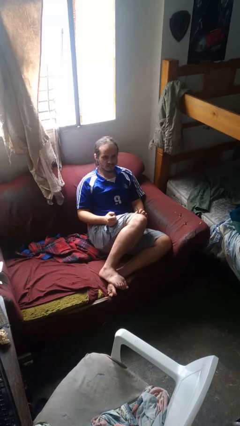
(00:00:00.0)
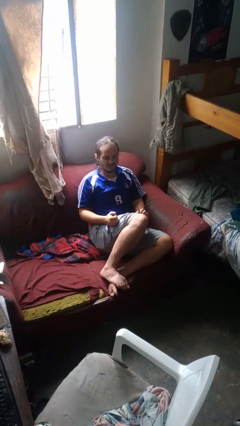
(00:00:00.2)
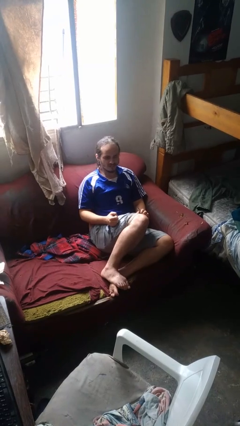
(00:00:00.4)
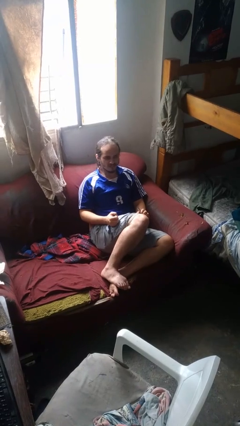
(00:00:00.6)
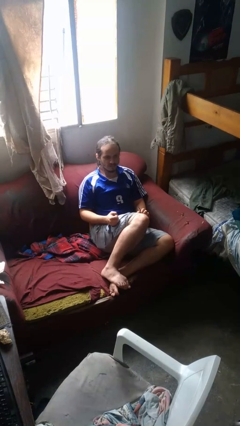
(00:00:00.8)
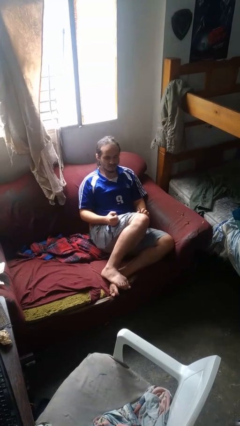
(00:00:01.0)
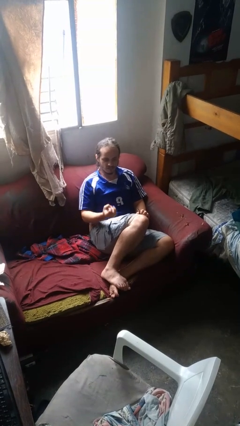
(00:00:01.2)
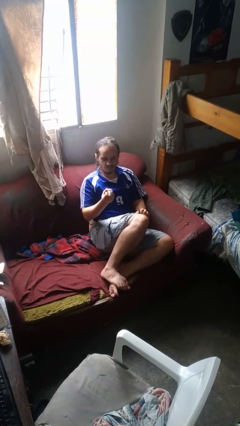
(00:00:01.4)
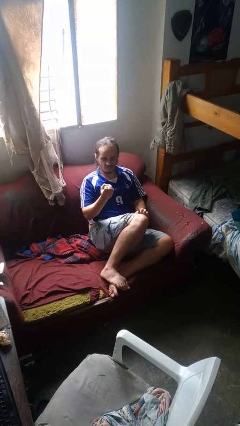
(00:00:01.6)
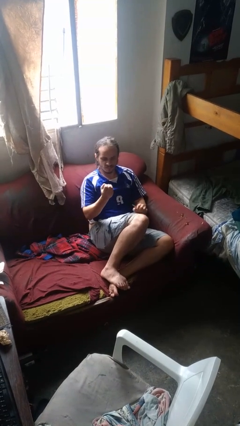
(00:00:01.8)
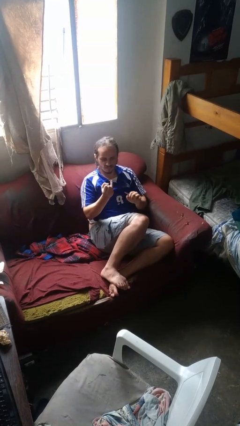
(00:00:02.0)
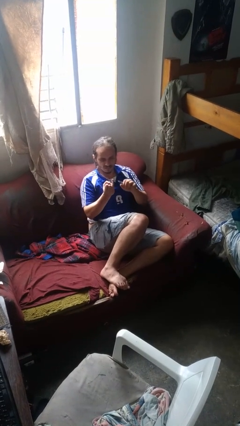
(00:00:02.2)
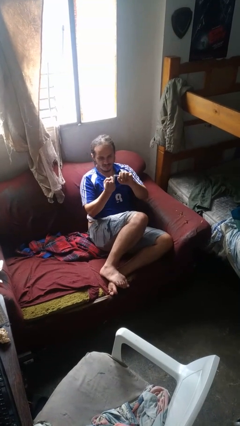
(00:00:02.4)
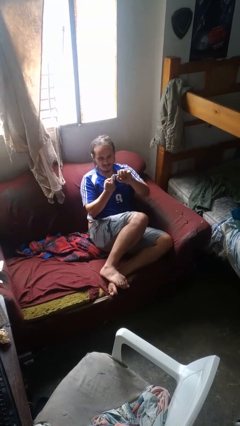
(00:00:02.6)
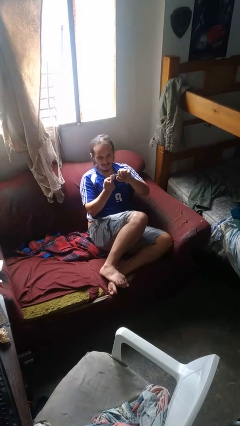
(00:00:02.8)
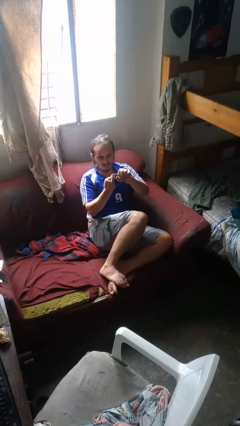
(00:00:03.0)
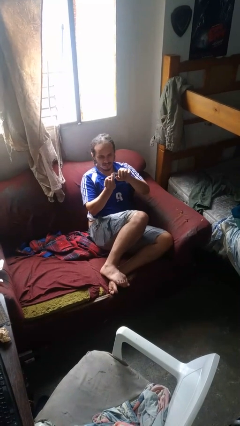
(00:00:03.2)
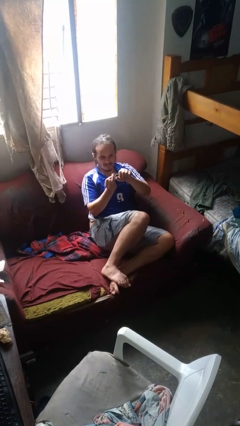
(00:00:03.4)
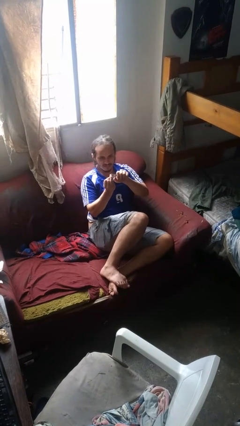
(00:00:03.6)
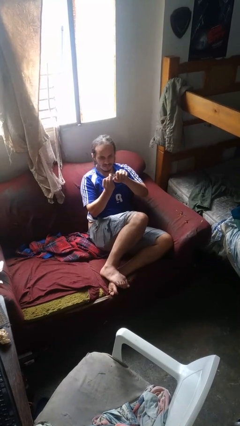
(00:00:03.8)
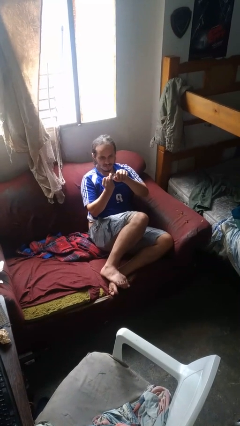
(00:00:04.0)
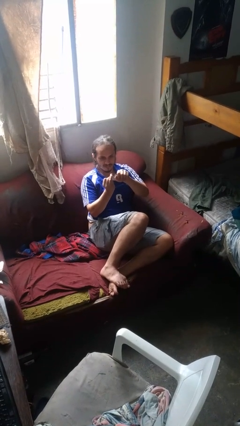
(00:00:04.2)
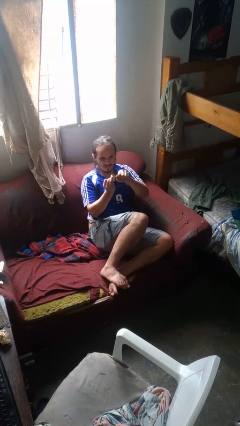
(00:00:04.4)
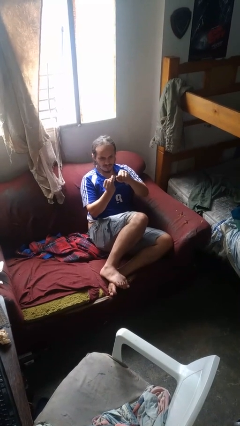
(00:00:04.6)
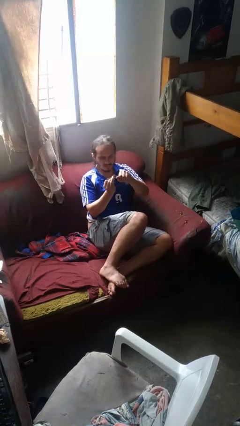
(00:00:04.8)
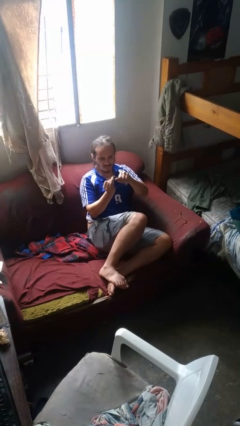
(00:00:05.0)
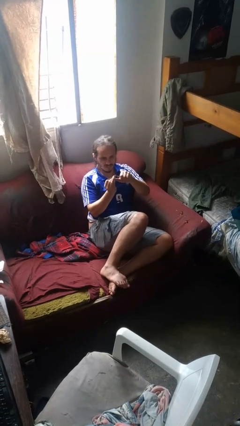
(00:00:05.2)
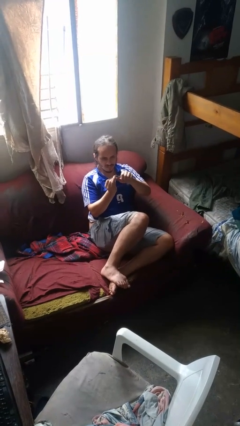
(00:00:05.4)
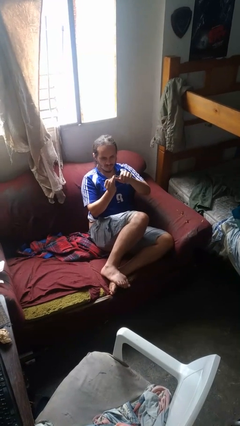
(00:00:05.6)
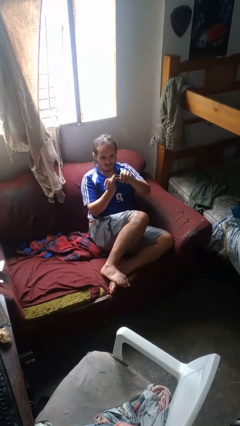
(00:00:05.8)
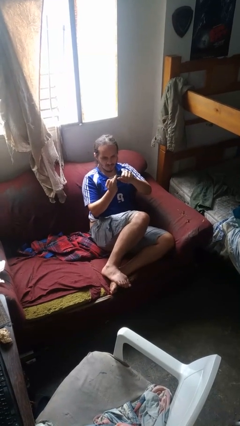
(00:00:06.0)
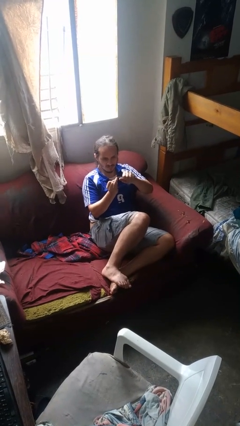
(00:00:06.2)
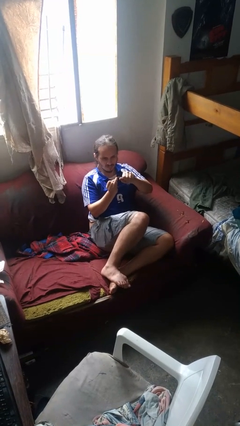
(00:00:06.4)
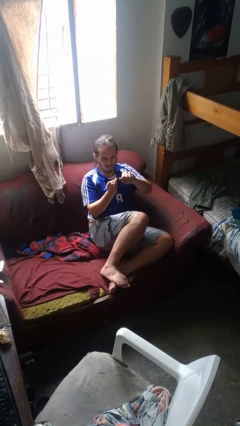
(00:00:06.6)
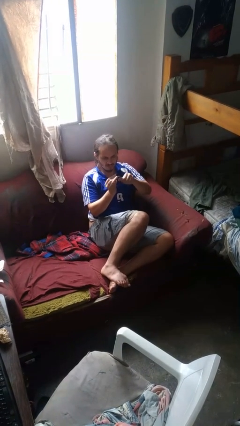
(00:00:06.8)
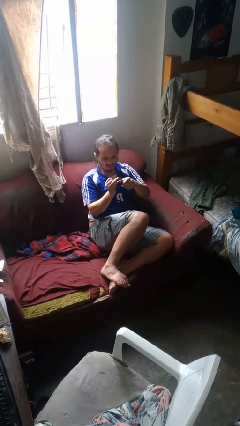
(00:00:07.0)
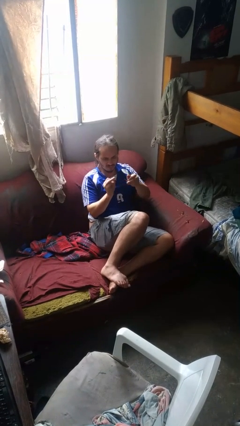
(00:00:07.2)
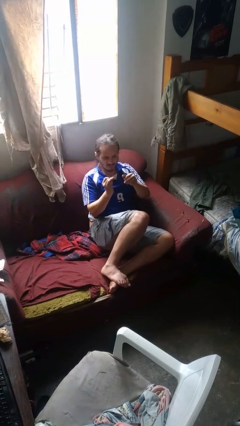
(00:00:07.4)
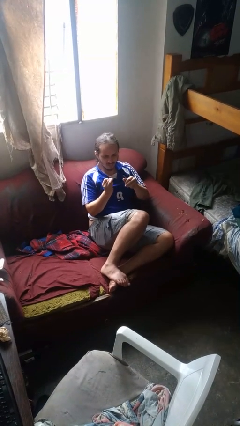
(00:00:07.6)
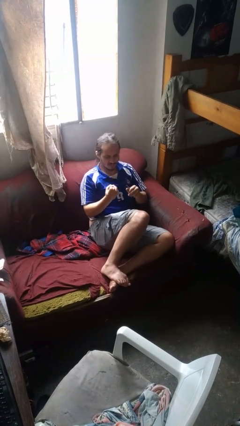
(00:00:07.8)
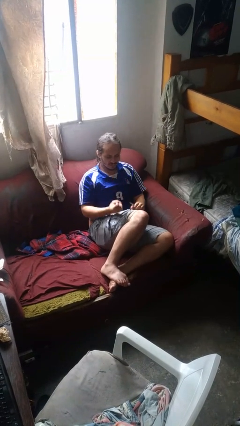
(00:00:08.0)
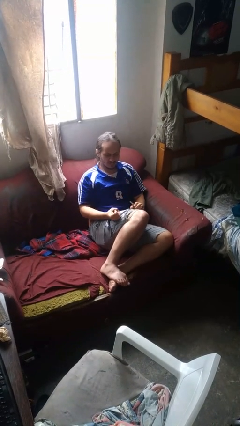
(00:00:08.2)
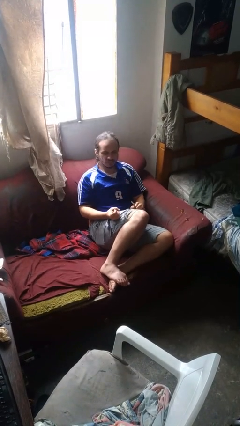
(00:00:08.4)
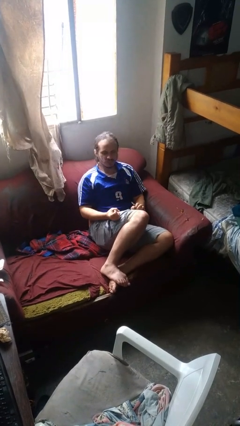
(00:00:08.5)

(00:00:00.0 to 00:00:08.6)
person clips fingernails

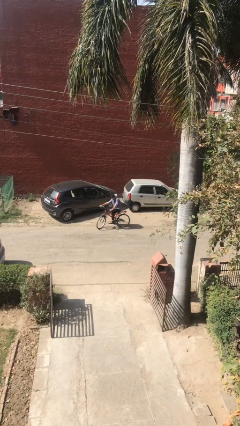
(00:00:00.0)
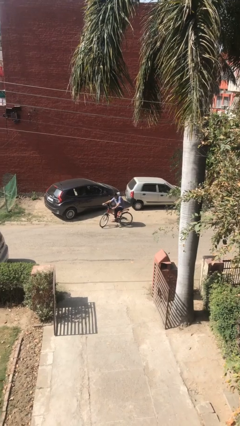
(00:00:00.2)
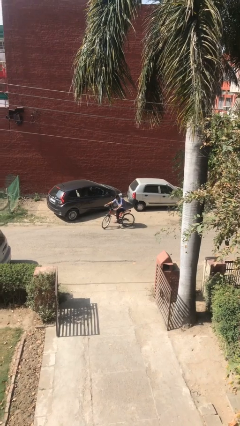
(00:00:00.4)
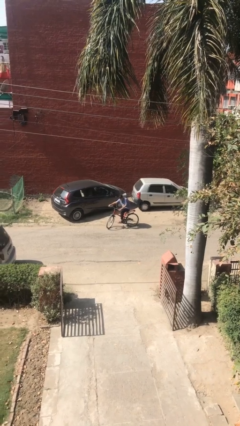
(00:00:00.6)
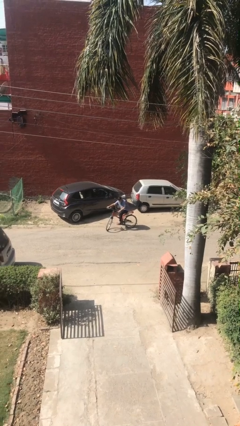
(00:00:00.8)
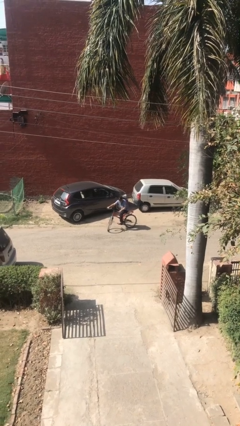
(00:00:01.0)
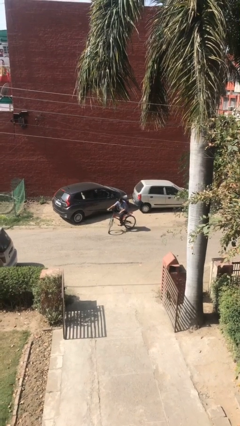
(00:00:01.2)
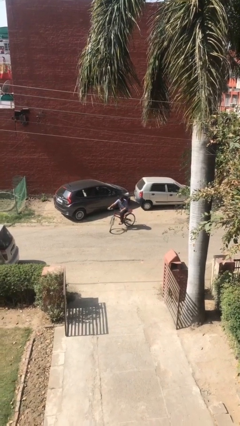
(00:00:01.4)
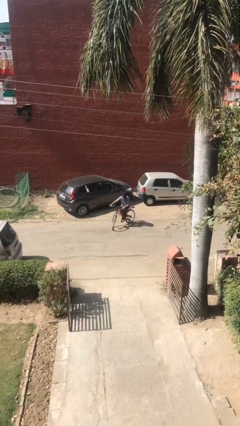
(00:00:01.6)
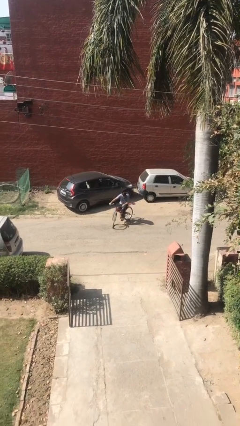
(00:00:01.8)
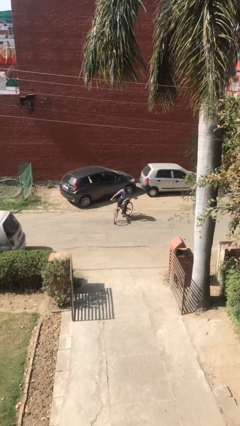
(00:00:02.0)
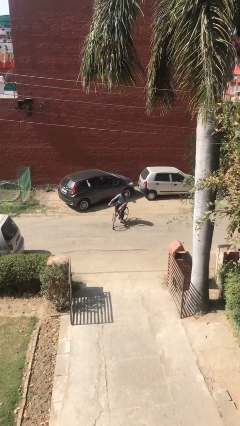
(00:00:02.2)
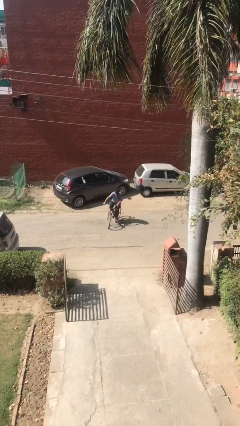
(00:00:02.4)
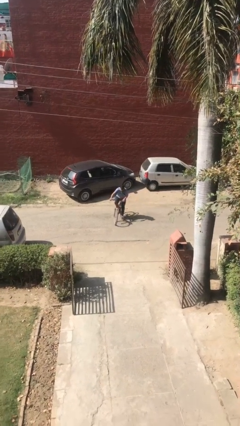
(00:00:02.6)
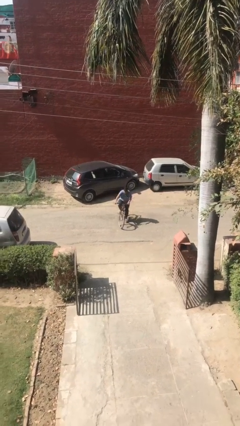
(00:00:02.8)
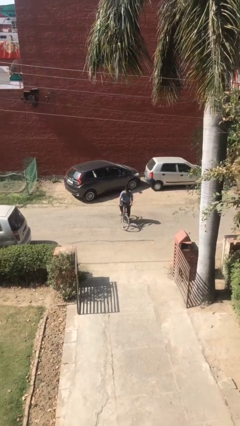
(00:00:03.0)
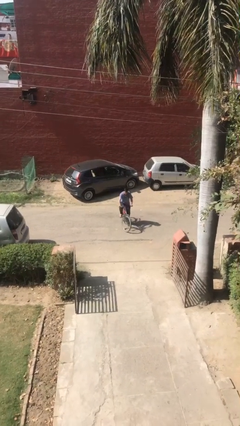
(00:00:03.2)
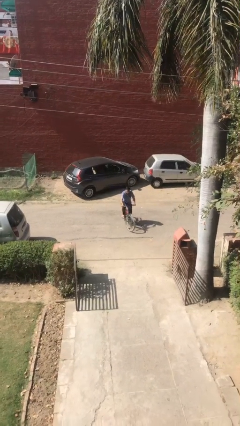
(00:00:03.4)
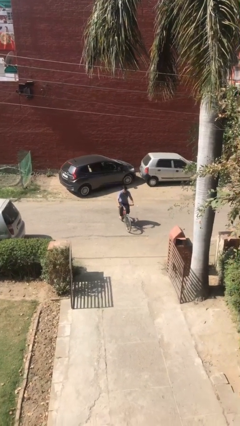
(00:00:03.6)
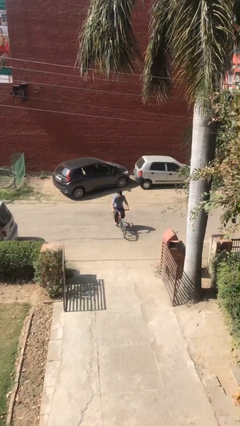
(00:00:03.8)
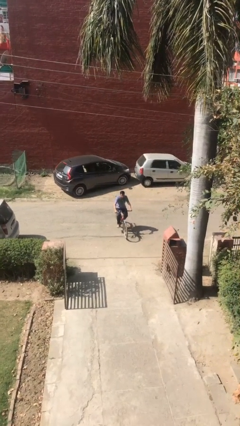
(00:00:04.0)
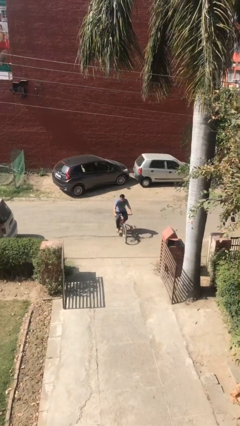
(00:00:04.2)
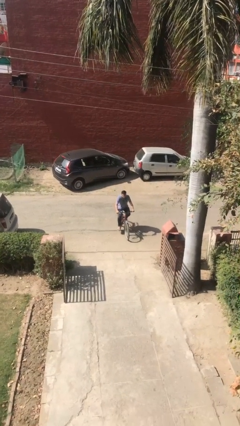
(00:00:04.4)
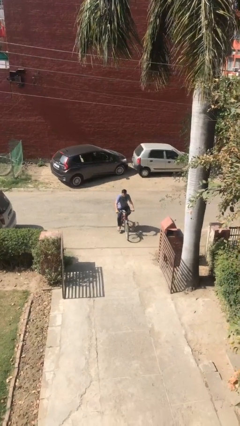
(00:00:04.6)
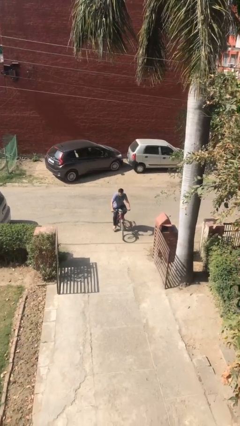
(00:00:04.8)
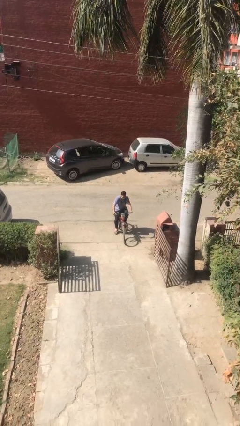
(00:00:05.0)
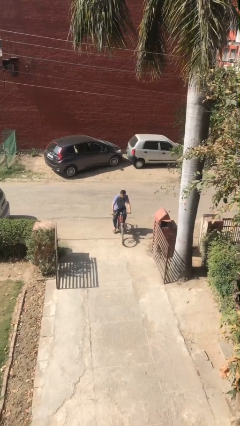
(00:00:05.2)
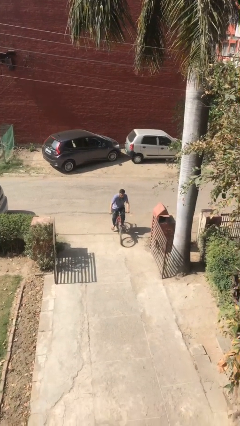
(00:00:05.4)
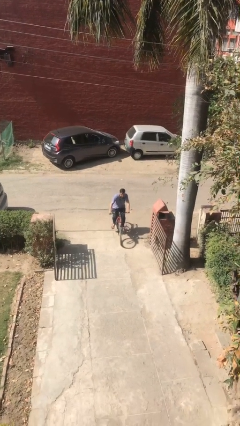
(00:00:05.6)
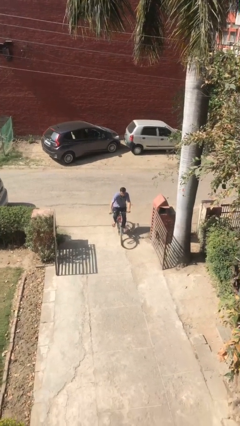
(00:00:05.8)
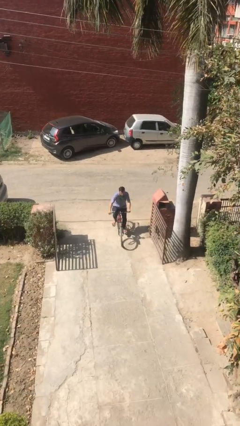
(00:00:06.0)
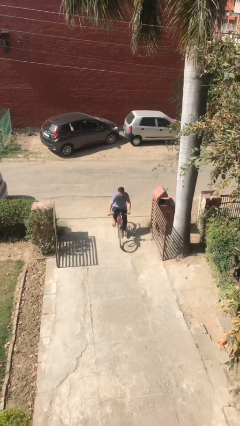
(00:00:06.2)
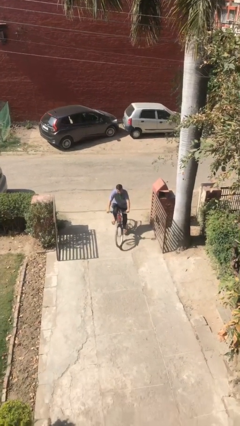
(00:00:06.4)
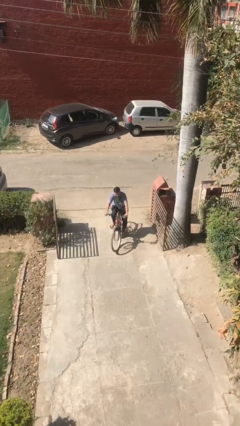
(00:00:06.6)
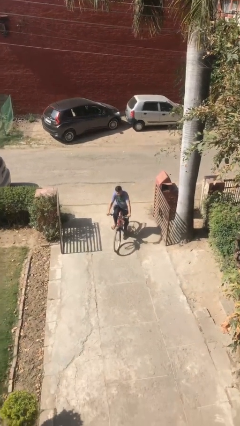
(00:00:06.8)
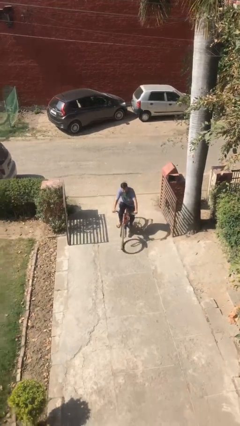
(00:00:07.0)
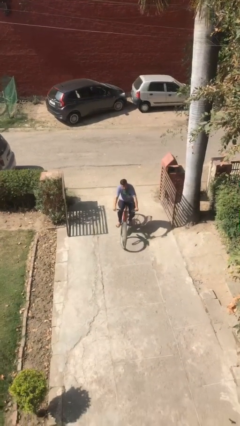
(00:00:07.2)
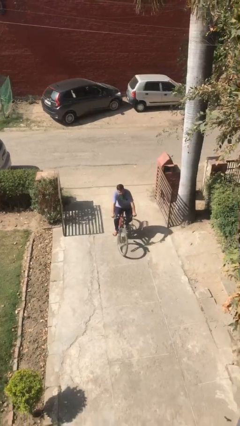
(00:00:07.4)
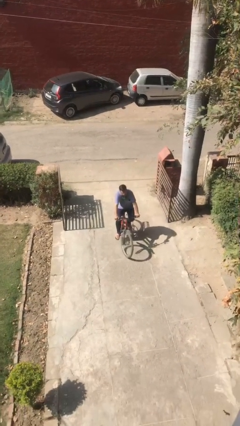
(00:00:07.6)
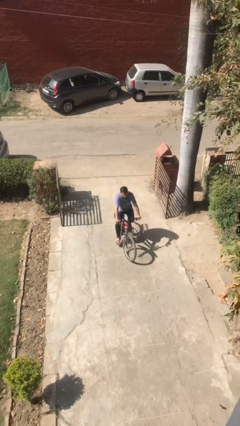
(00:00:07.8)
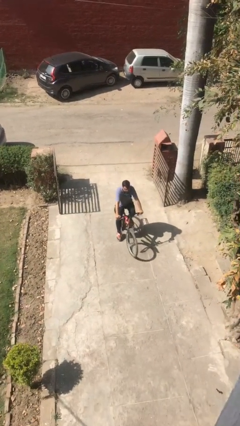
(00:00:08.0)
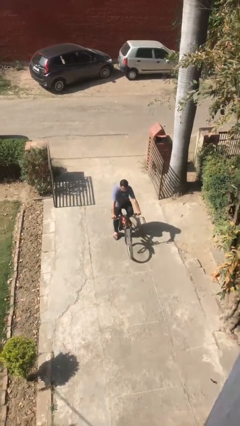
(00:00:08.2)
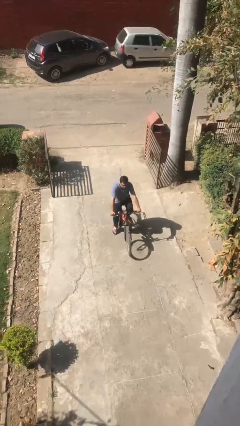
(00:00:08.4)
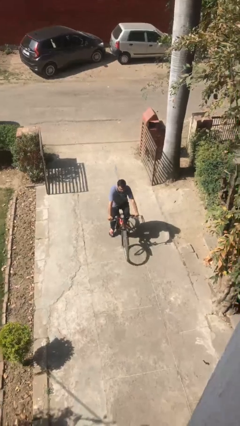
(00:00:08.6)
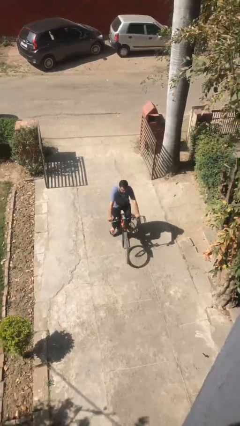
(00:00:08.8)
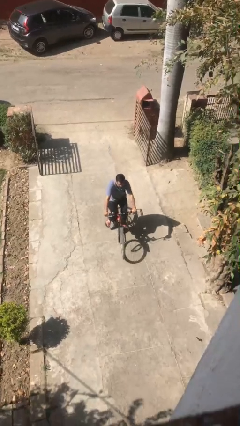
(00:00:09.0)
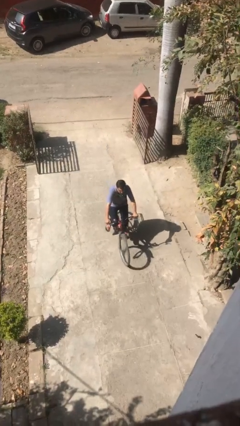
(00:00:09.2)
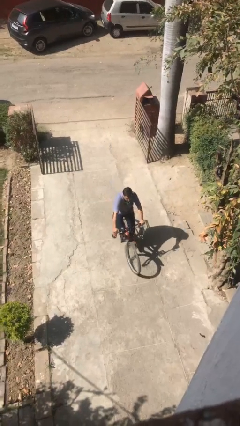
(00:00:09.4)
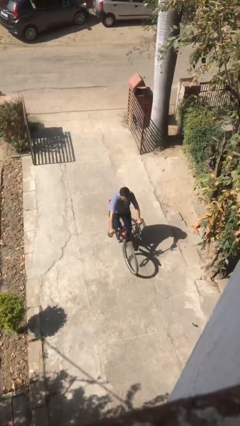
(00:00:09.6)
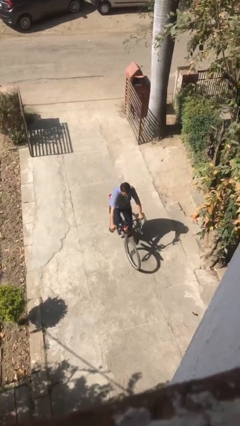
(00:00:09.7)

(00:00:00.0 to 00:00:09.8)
person rides bicycle
